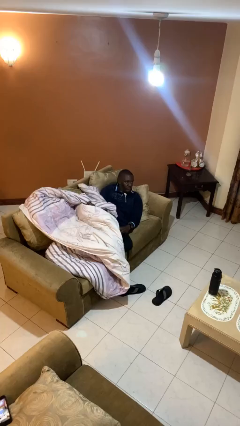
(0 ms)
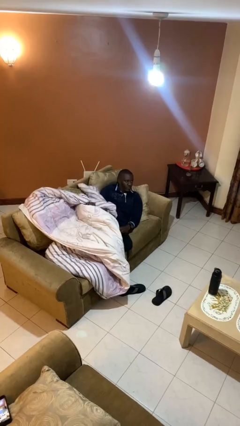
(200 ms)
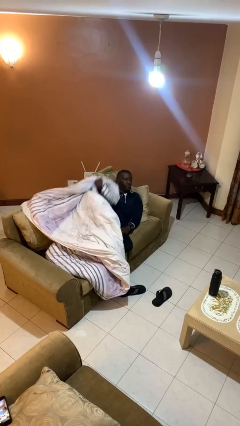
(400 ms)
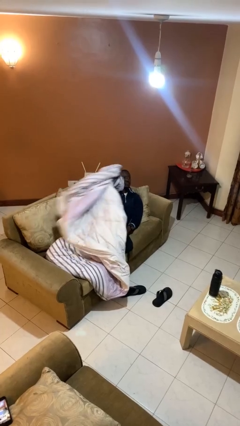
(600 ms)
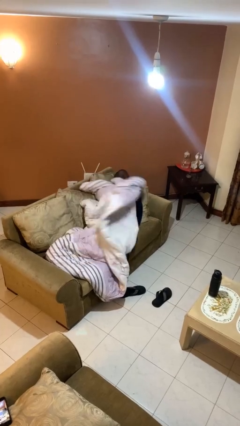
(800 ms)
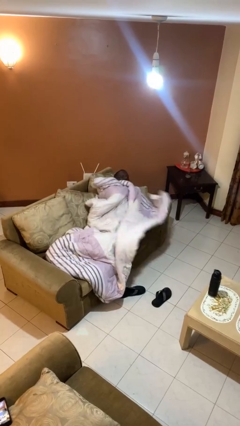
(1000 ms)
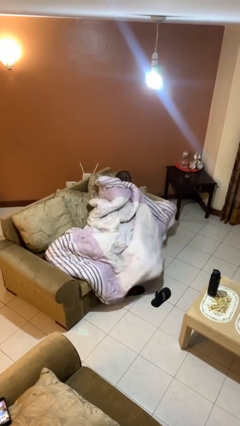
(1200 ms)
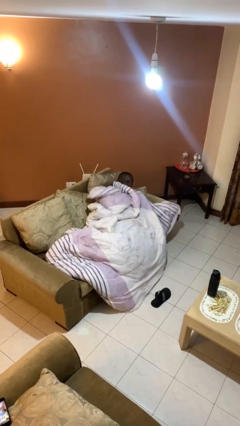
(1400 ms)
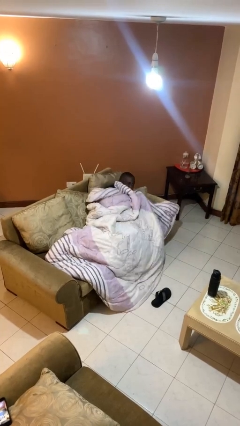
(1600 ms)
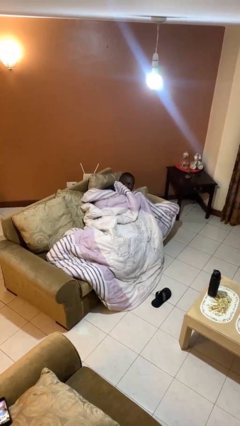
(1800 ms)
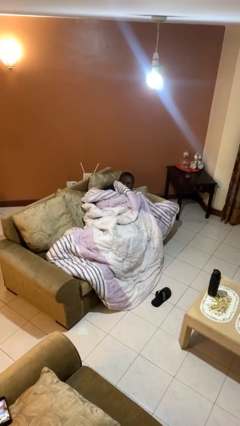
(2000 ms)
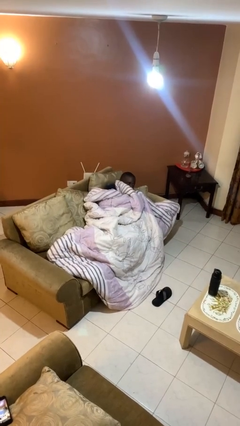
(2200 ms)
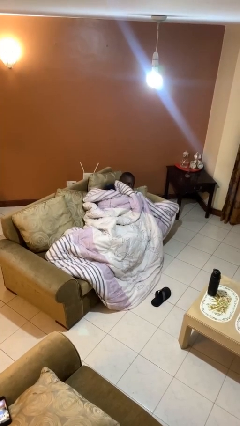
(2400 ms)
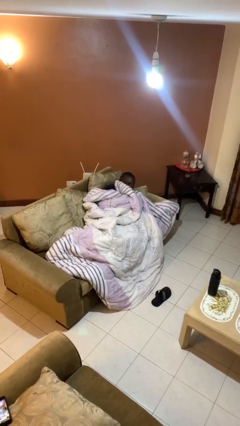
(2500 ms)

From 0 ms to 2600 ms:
person covers with blanket

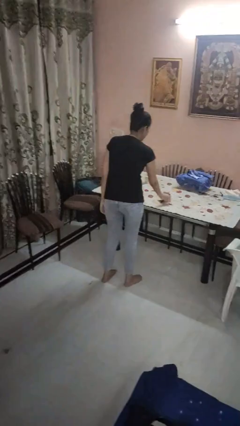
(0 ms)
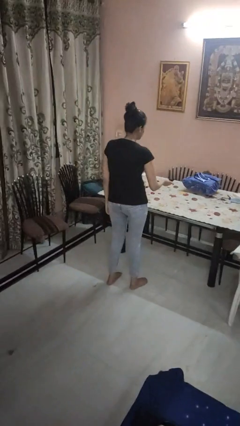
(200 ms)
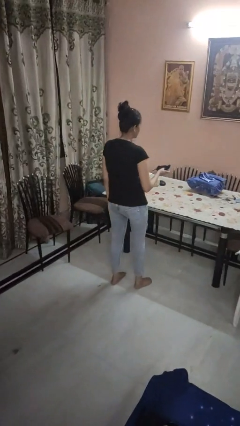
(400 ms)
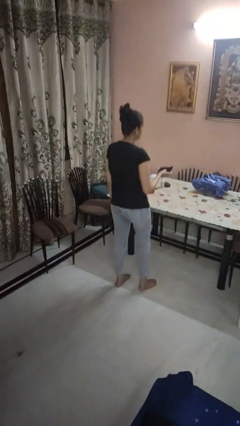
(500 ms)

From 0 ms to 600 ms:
person picks up object from table

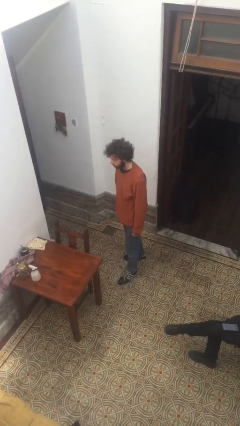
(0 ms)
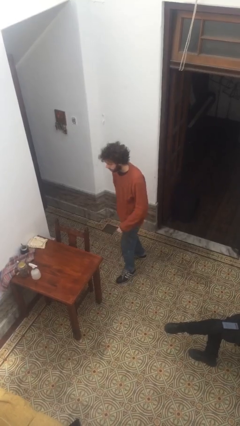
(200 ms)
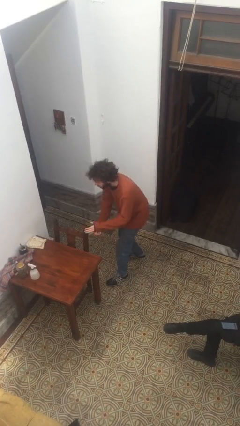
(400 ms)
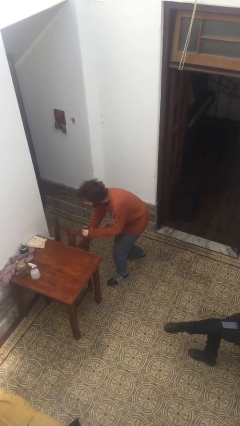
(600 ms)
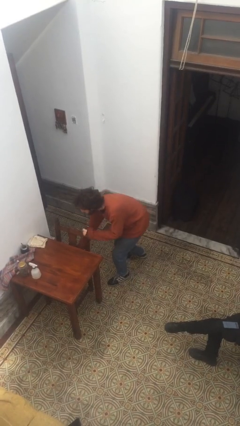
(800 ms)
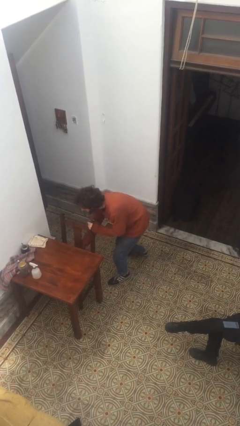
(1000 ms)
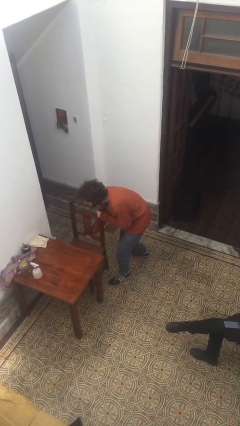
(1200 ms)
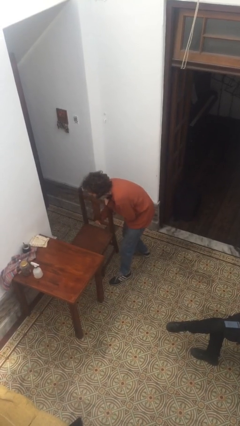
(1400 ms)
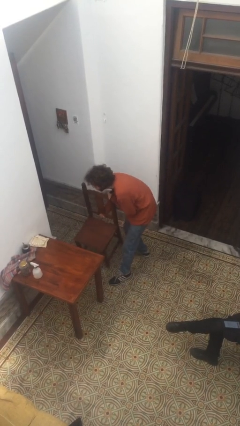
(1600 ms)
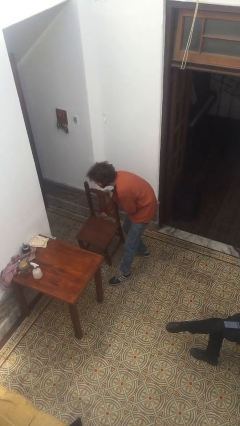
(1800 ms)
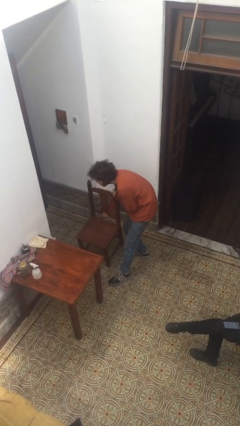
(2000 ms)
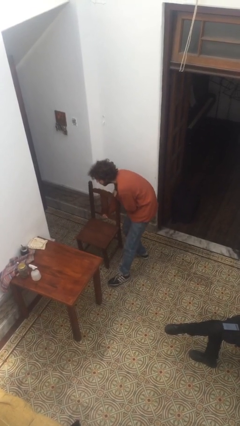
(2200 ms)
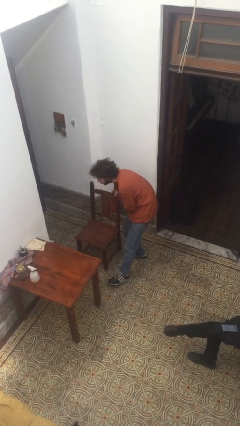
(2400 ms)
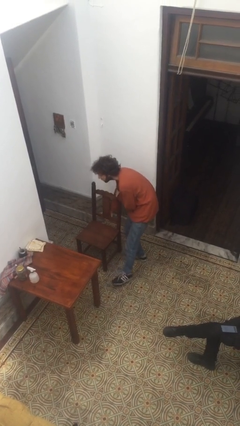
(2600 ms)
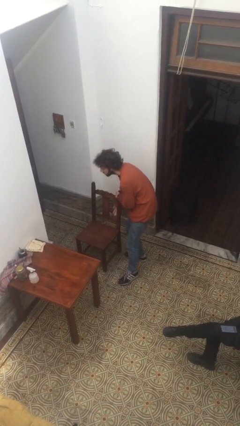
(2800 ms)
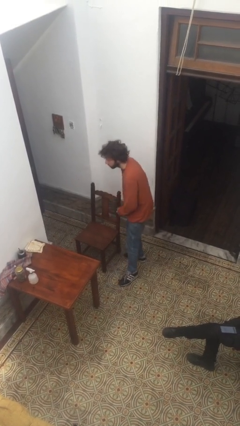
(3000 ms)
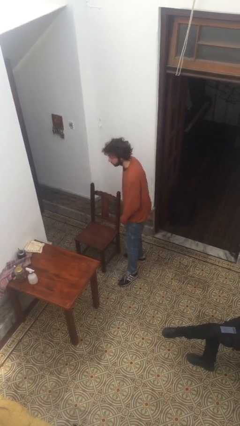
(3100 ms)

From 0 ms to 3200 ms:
person pulls out chair

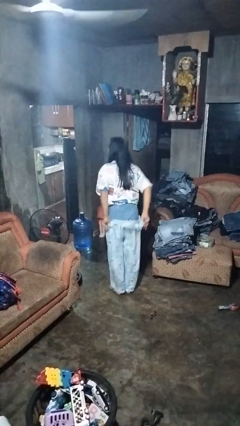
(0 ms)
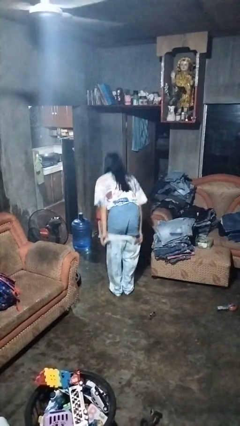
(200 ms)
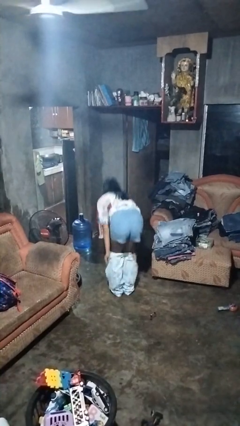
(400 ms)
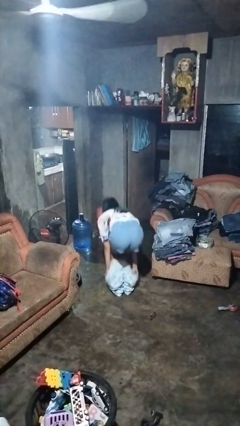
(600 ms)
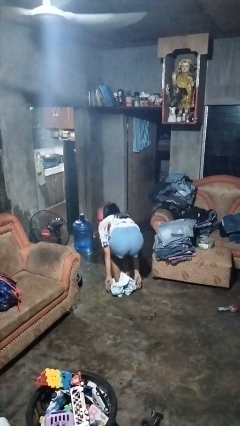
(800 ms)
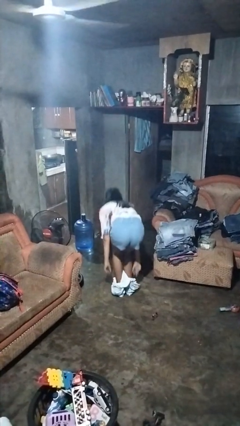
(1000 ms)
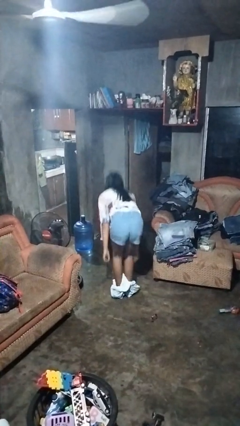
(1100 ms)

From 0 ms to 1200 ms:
person takes off pants

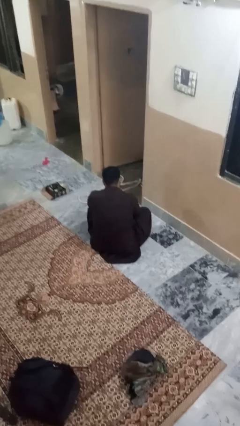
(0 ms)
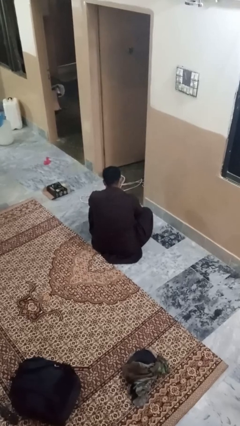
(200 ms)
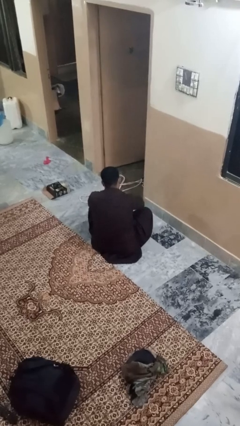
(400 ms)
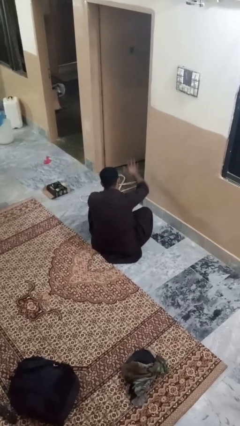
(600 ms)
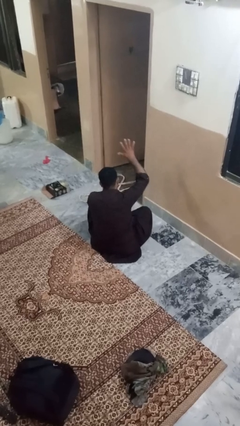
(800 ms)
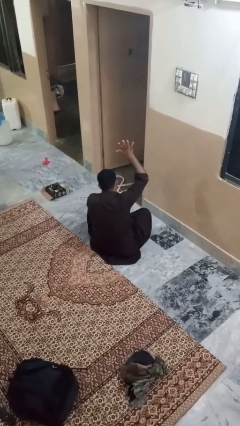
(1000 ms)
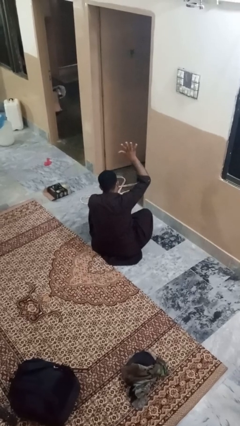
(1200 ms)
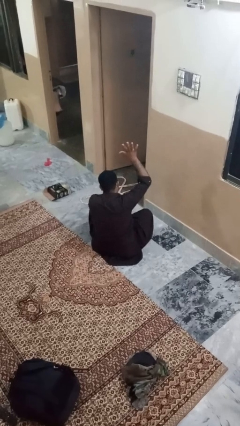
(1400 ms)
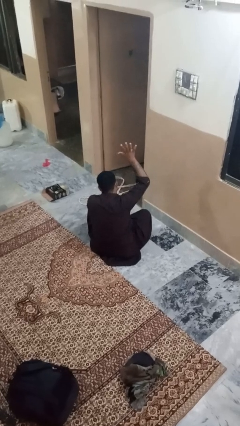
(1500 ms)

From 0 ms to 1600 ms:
person gestures number five

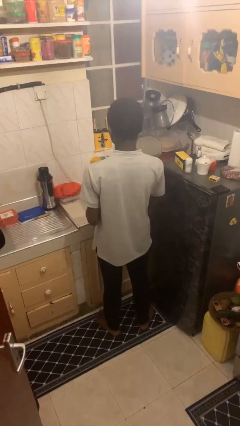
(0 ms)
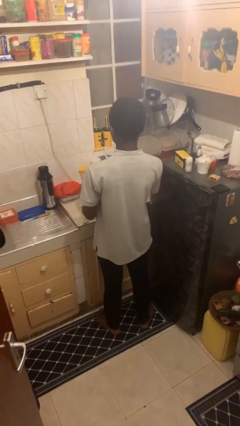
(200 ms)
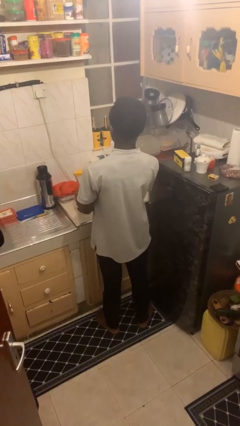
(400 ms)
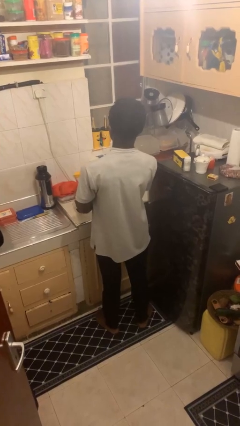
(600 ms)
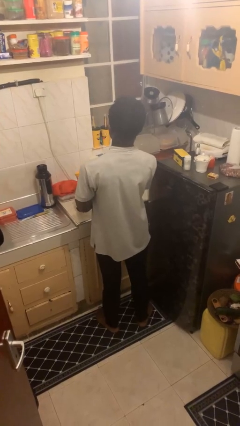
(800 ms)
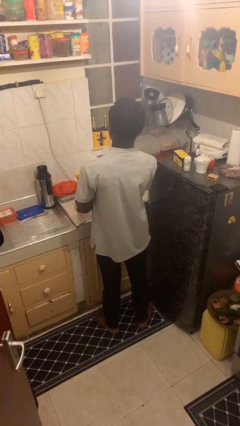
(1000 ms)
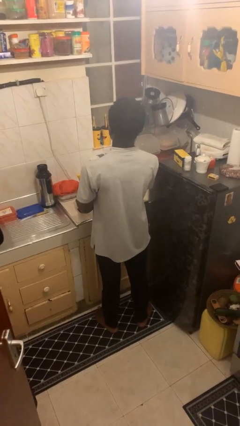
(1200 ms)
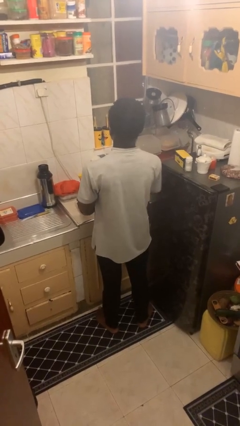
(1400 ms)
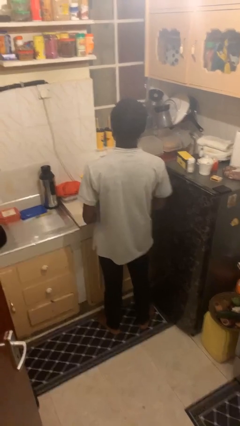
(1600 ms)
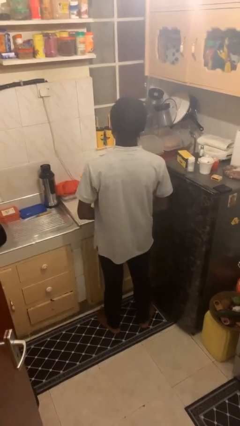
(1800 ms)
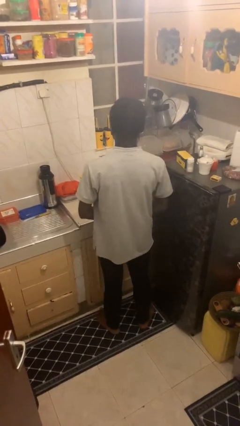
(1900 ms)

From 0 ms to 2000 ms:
person puts down object on countertop

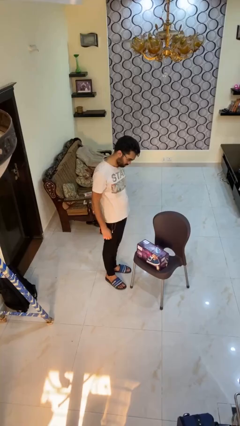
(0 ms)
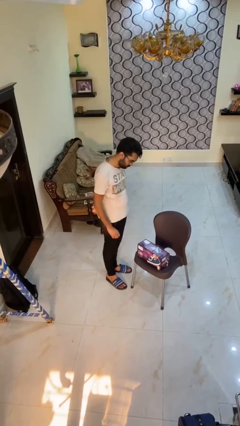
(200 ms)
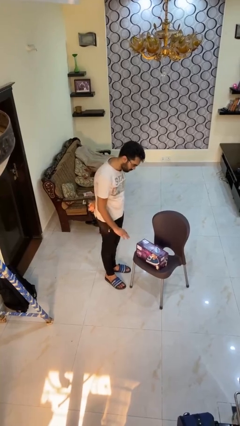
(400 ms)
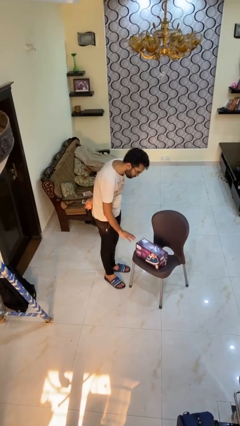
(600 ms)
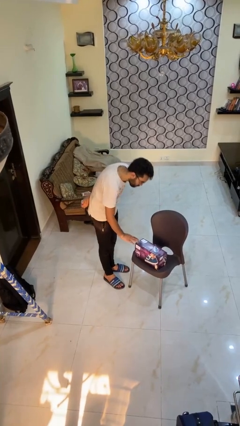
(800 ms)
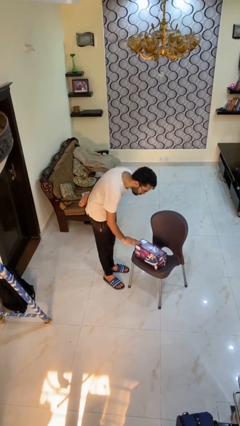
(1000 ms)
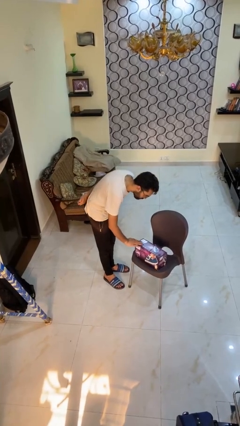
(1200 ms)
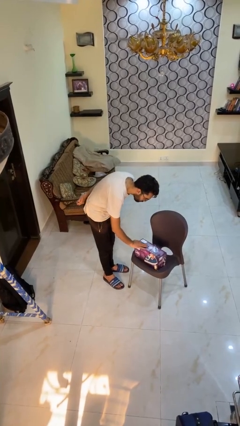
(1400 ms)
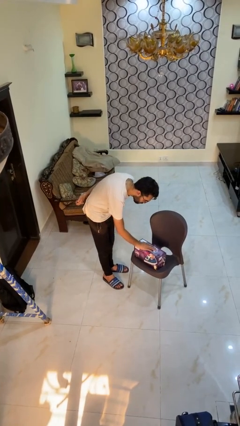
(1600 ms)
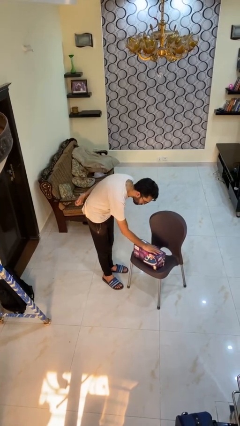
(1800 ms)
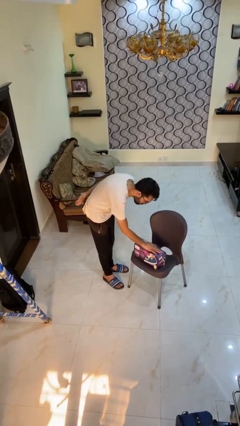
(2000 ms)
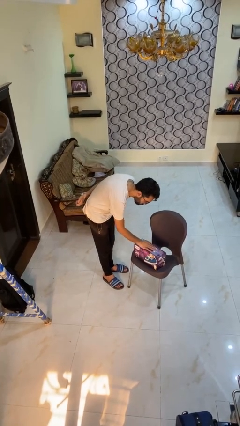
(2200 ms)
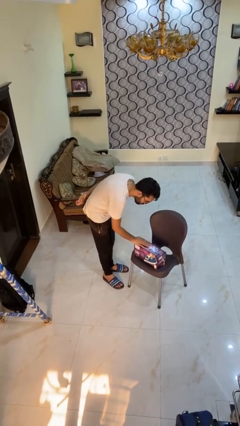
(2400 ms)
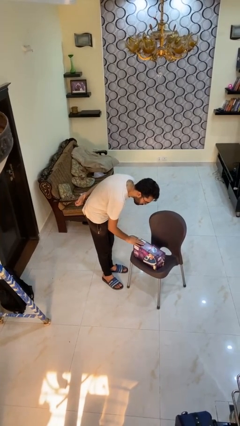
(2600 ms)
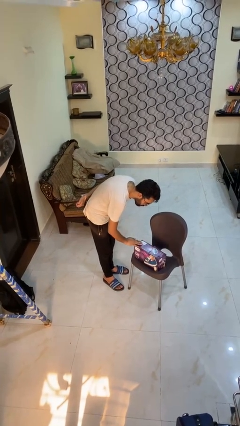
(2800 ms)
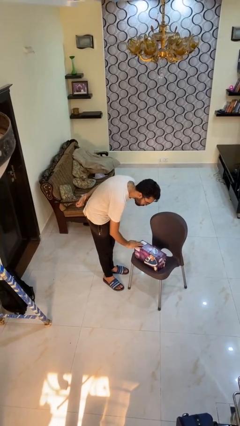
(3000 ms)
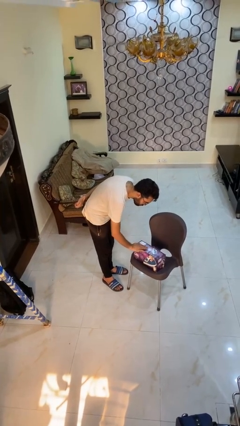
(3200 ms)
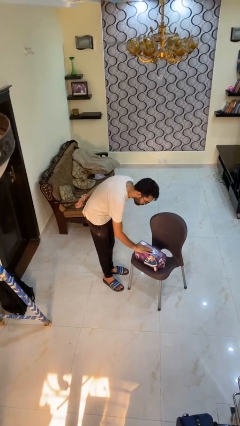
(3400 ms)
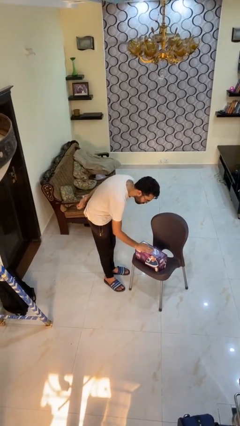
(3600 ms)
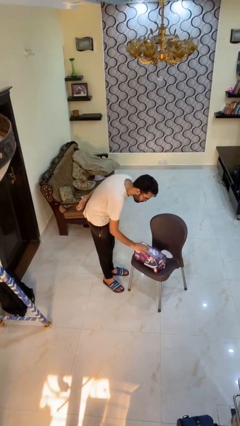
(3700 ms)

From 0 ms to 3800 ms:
person waves hand over object

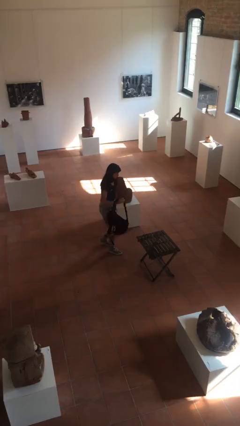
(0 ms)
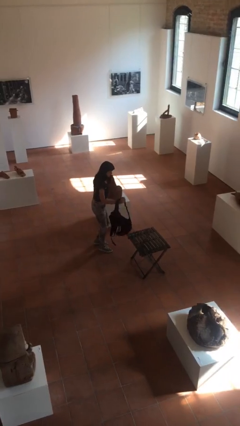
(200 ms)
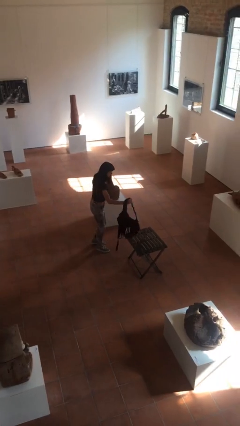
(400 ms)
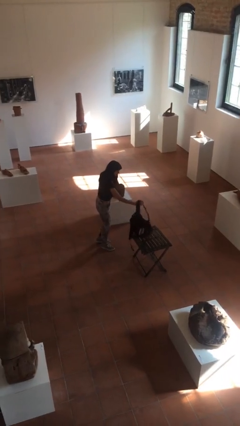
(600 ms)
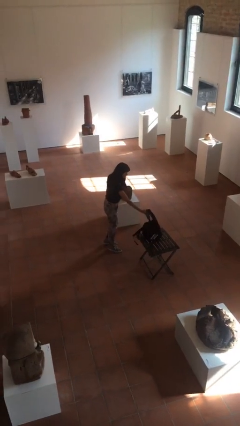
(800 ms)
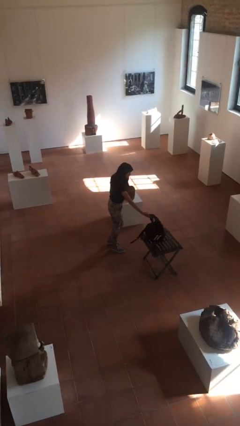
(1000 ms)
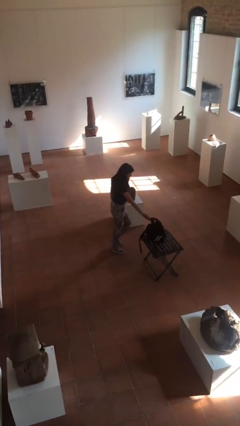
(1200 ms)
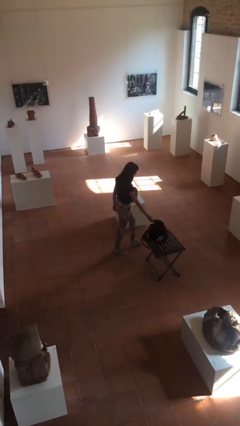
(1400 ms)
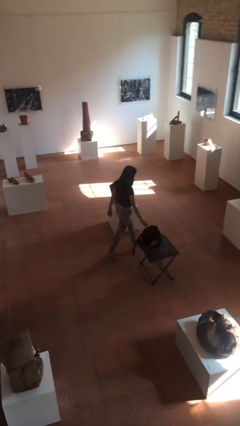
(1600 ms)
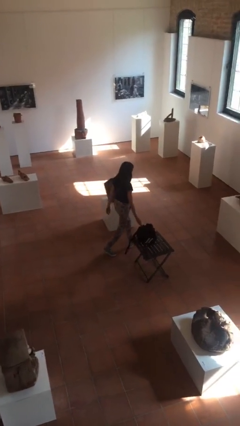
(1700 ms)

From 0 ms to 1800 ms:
person puts down object on table
